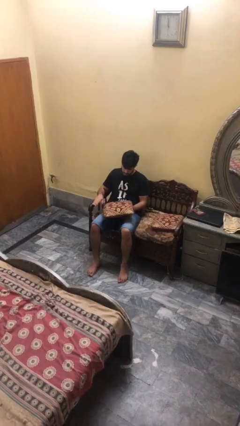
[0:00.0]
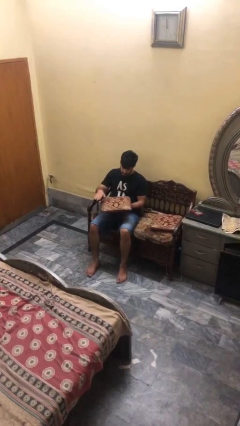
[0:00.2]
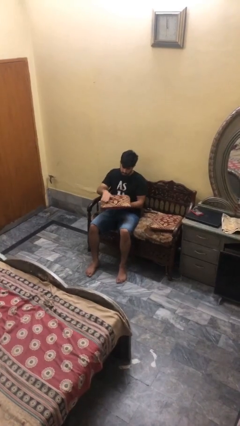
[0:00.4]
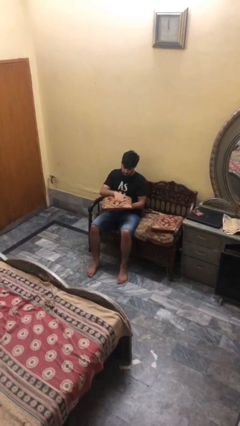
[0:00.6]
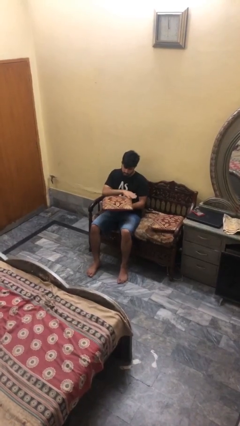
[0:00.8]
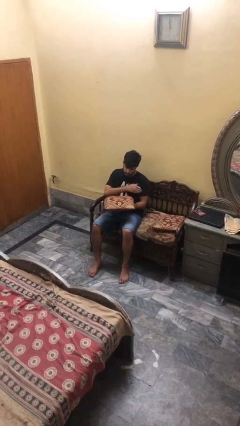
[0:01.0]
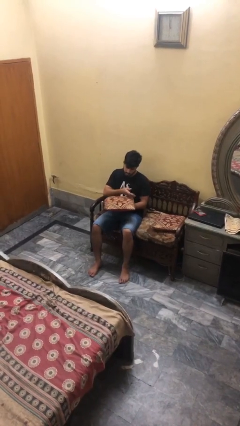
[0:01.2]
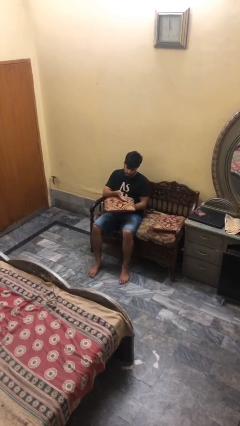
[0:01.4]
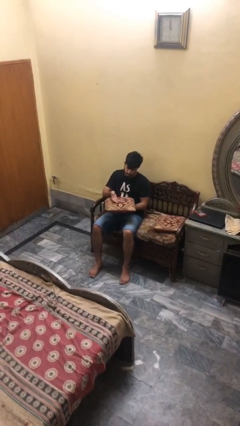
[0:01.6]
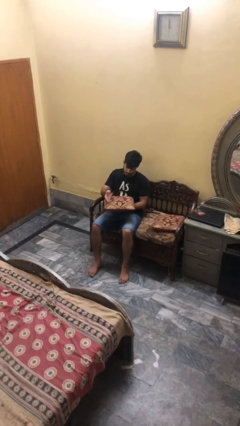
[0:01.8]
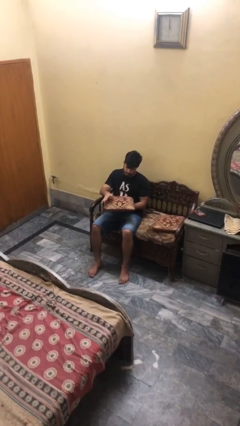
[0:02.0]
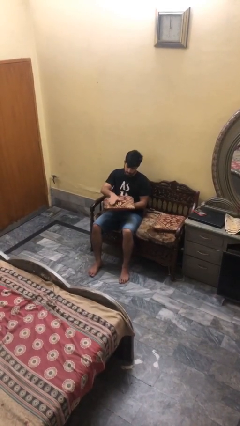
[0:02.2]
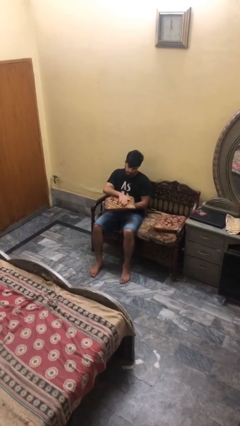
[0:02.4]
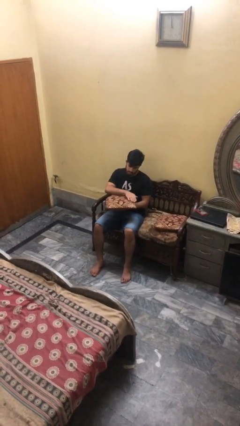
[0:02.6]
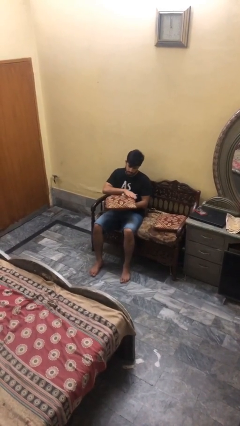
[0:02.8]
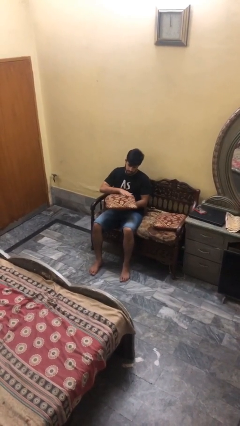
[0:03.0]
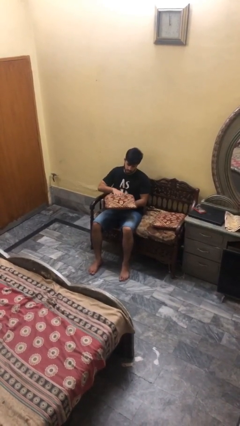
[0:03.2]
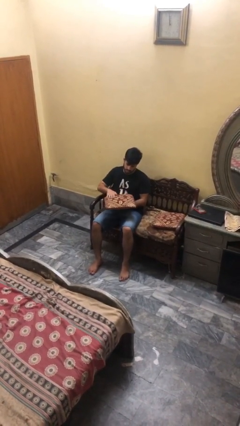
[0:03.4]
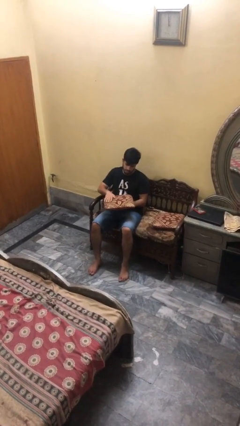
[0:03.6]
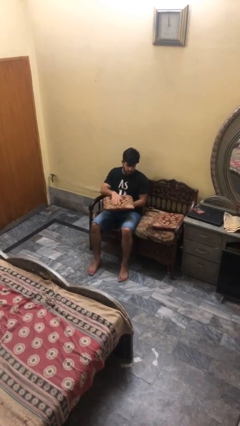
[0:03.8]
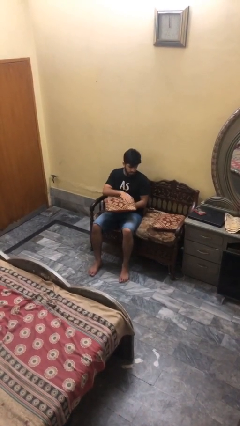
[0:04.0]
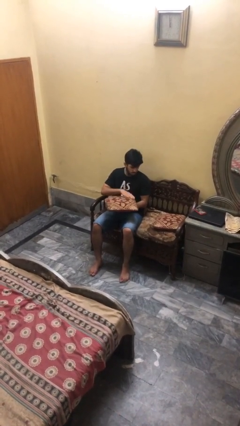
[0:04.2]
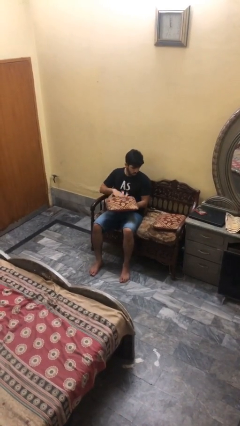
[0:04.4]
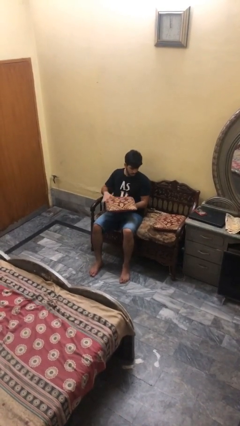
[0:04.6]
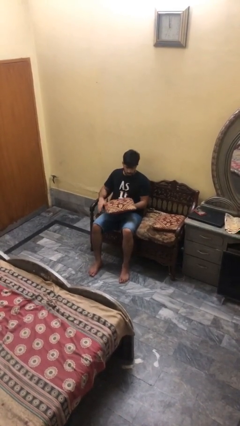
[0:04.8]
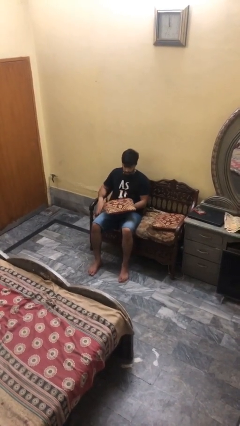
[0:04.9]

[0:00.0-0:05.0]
person waves hand over object

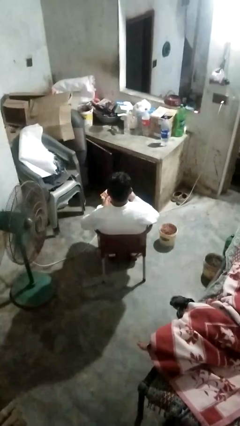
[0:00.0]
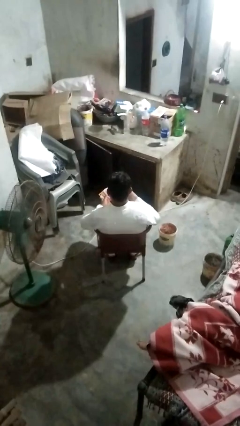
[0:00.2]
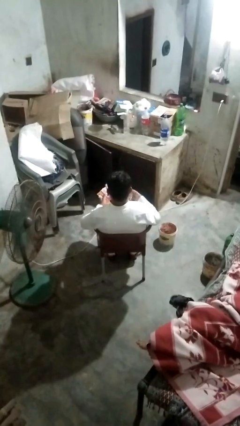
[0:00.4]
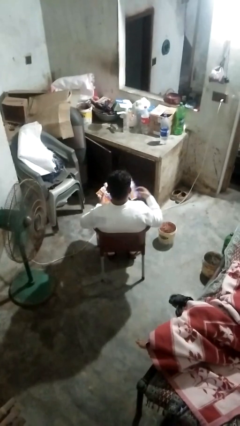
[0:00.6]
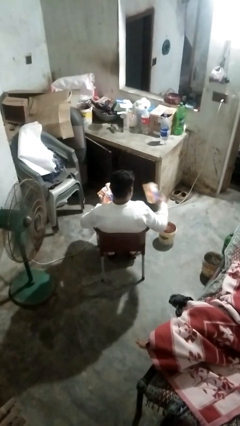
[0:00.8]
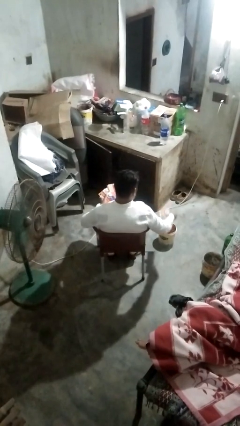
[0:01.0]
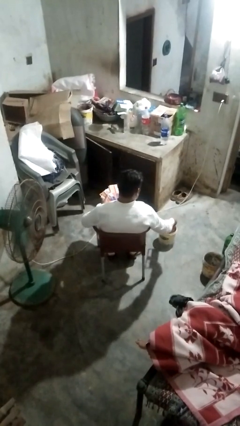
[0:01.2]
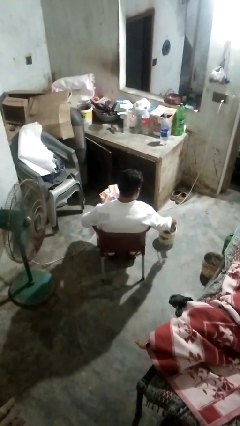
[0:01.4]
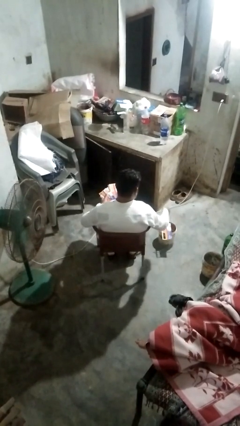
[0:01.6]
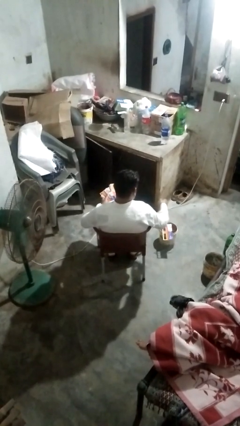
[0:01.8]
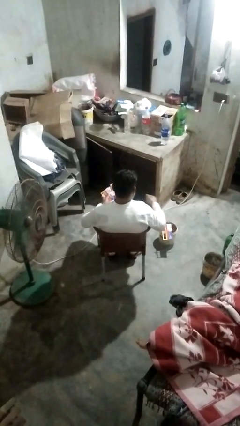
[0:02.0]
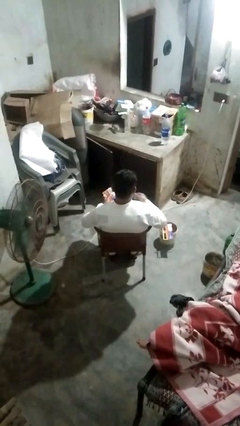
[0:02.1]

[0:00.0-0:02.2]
person discards trash

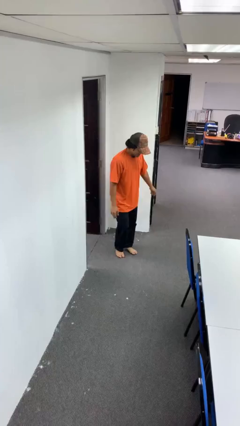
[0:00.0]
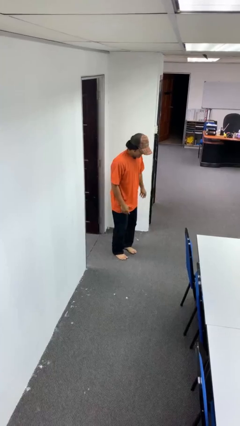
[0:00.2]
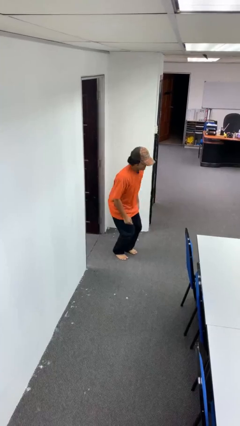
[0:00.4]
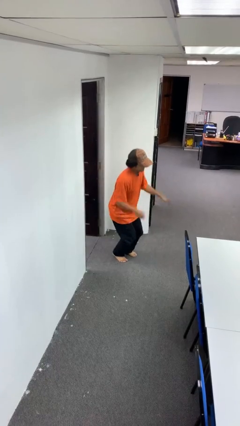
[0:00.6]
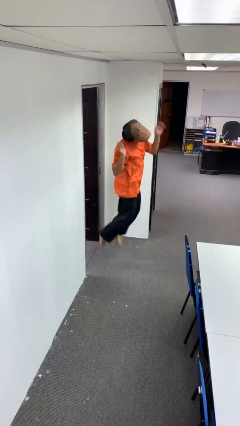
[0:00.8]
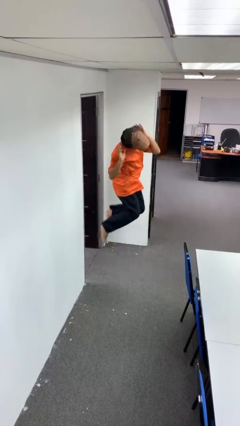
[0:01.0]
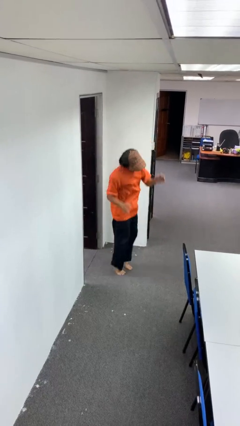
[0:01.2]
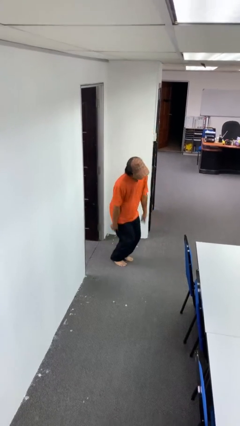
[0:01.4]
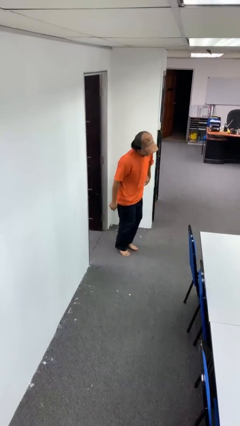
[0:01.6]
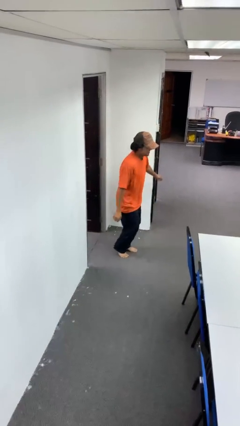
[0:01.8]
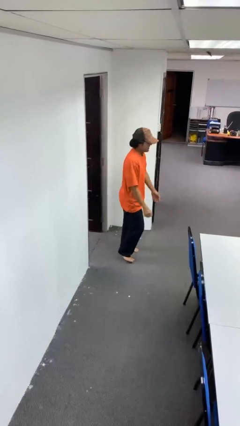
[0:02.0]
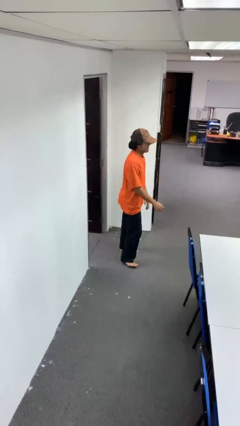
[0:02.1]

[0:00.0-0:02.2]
person jumps

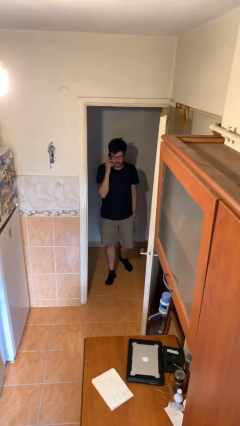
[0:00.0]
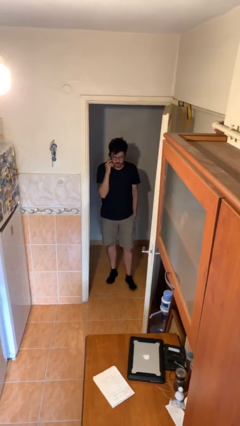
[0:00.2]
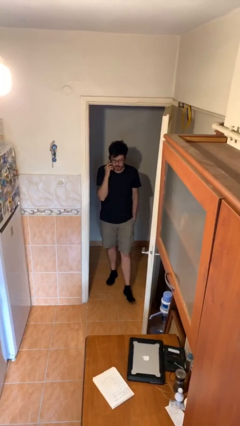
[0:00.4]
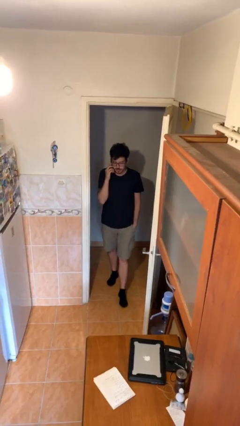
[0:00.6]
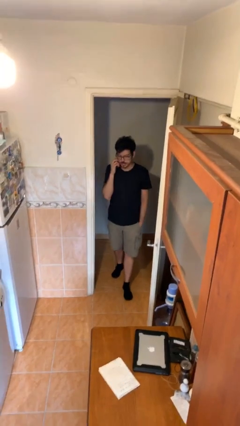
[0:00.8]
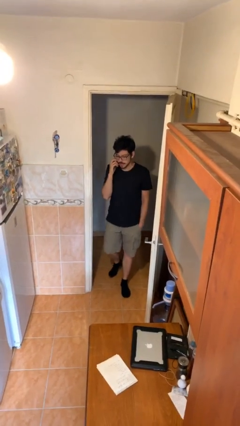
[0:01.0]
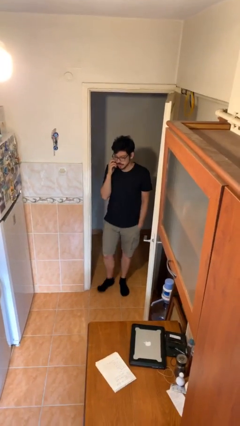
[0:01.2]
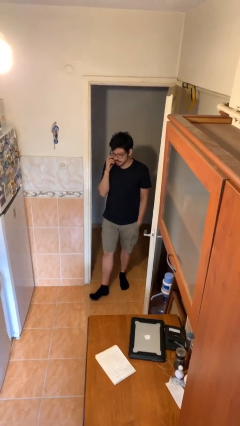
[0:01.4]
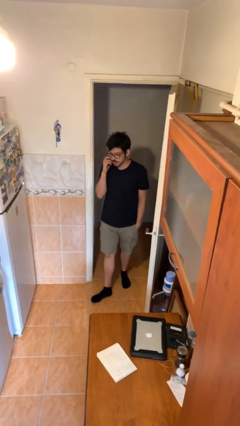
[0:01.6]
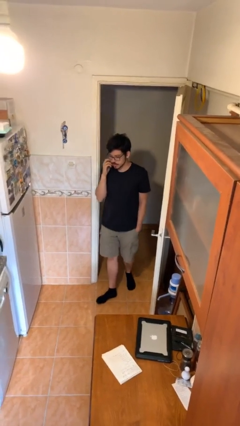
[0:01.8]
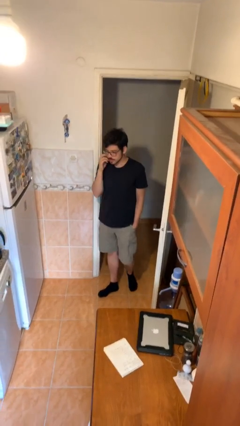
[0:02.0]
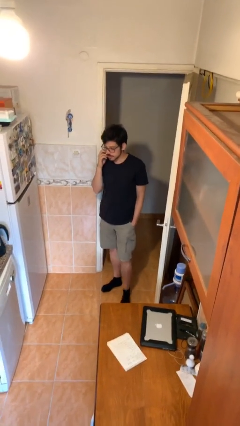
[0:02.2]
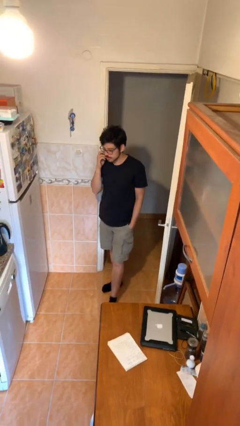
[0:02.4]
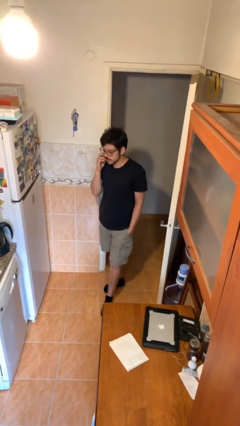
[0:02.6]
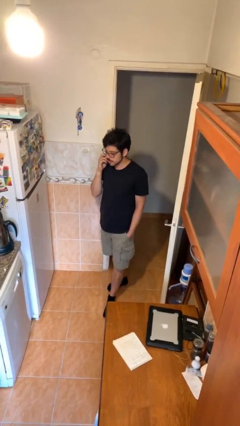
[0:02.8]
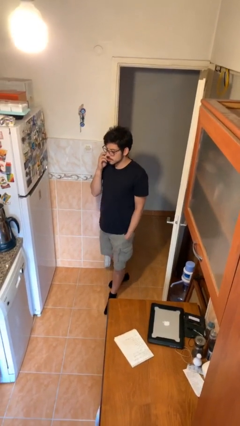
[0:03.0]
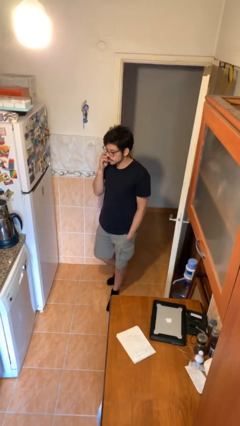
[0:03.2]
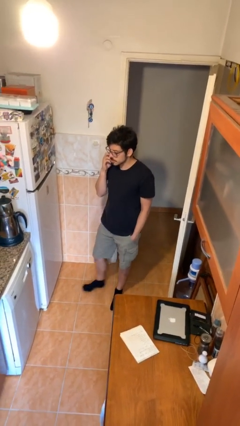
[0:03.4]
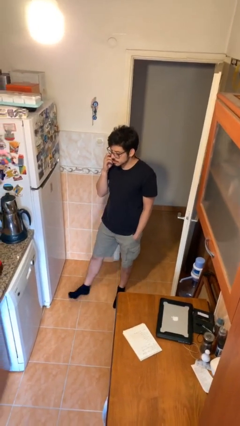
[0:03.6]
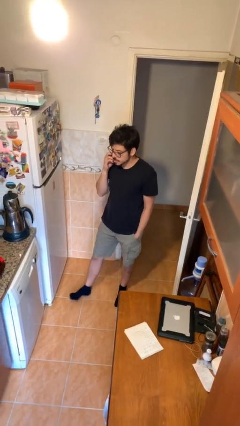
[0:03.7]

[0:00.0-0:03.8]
person enters scene through structure

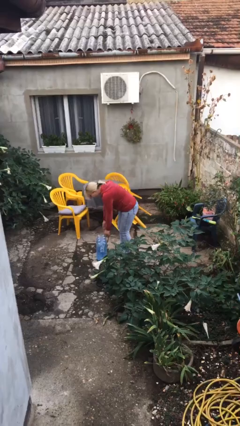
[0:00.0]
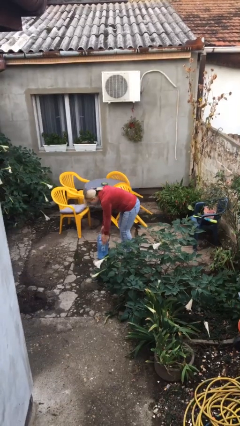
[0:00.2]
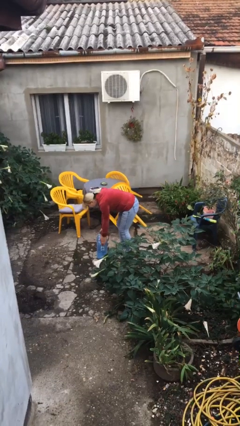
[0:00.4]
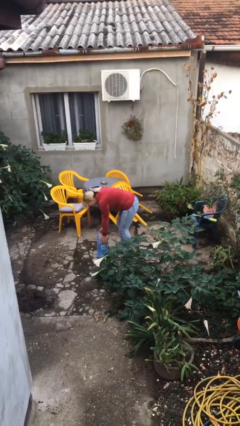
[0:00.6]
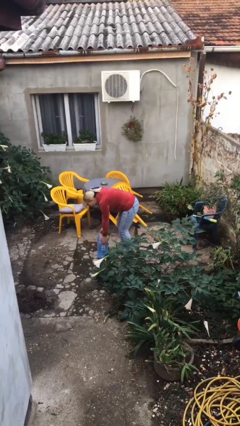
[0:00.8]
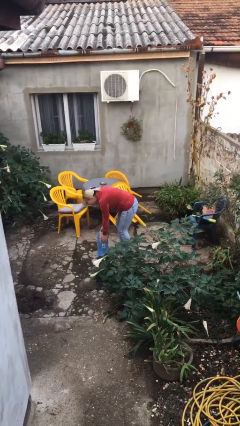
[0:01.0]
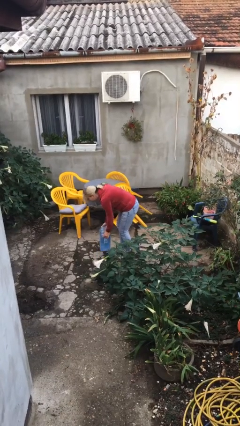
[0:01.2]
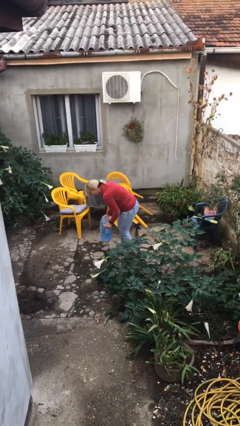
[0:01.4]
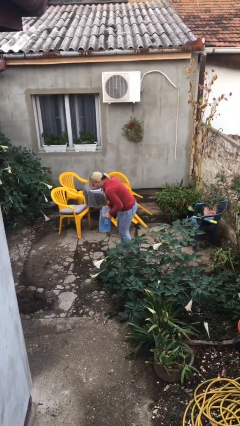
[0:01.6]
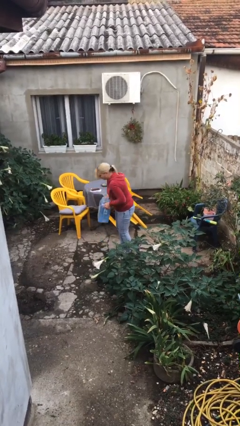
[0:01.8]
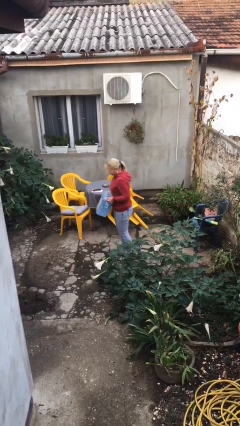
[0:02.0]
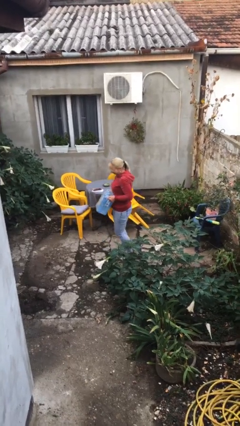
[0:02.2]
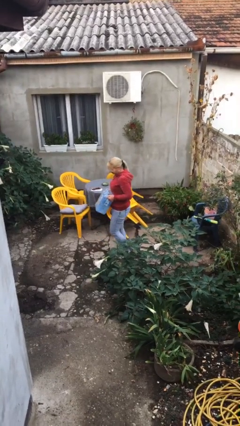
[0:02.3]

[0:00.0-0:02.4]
person picks up object from floor

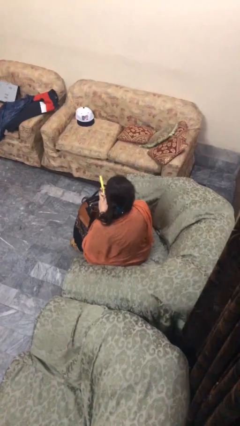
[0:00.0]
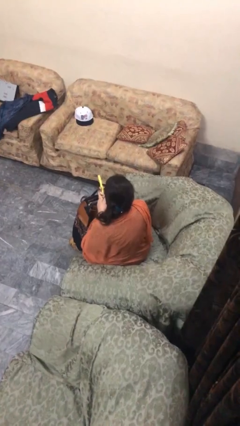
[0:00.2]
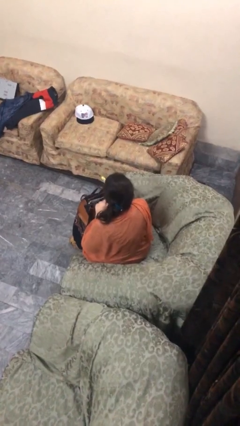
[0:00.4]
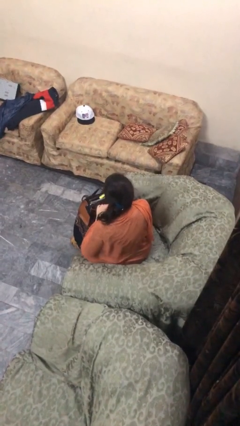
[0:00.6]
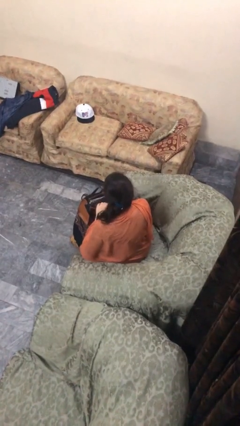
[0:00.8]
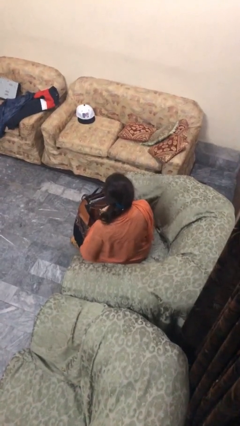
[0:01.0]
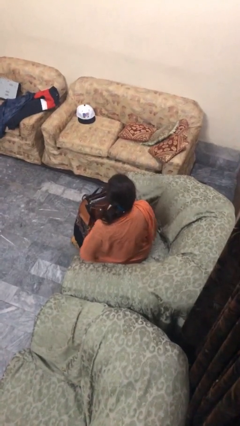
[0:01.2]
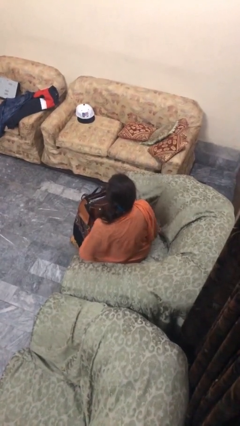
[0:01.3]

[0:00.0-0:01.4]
person puts object into purse

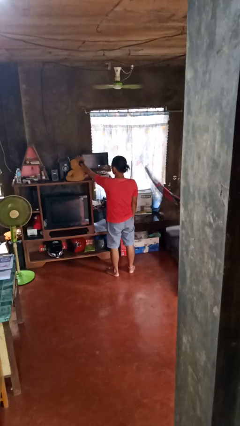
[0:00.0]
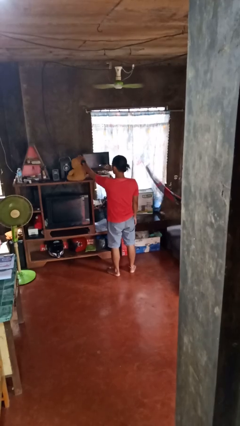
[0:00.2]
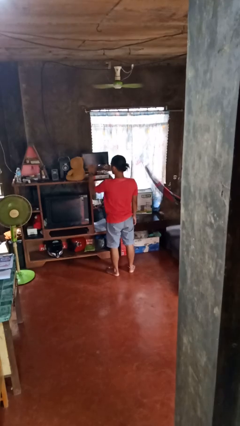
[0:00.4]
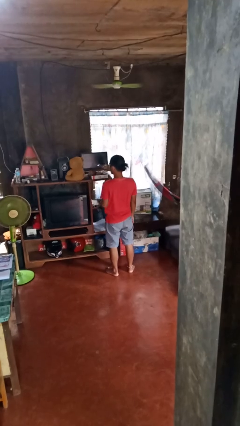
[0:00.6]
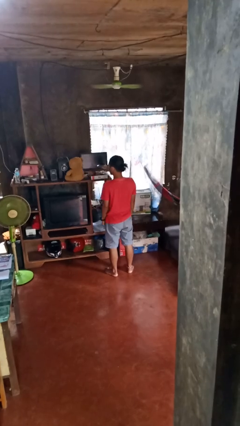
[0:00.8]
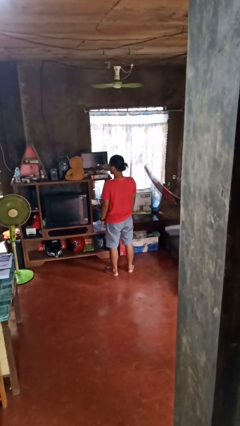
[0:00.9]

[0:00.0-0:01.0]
person puts down object on shelf
